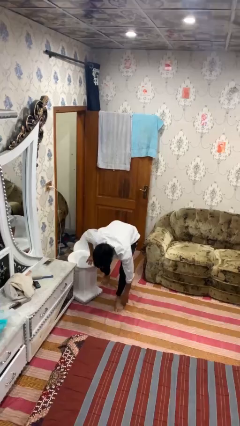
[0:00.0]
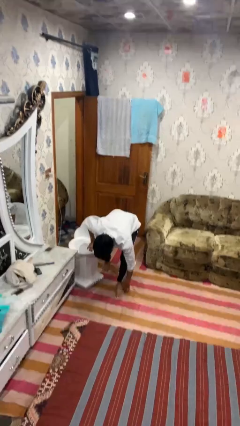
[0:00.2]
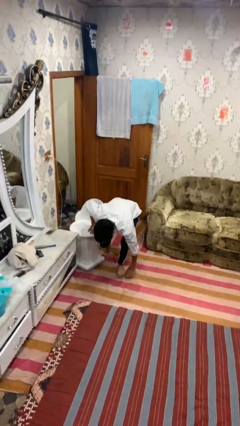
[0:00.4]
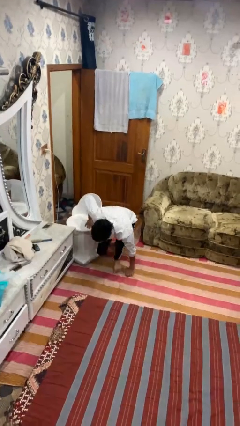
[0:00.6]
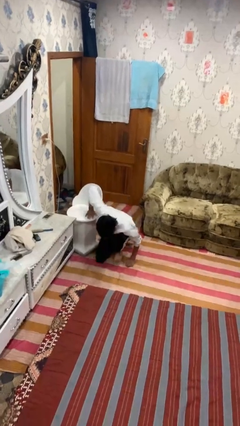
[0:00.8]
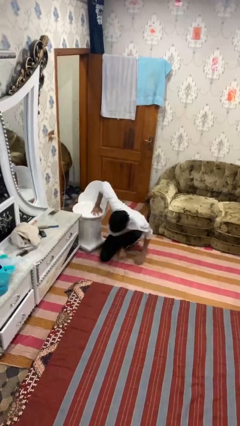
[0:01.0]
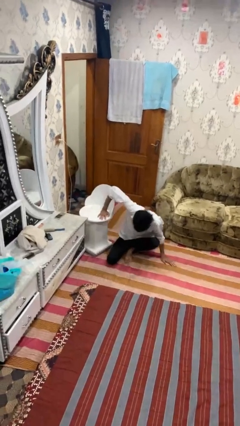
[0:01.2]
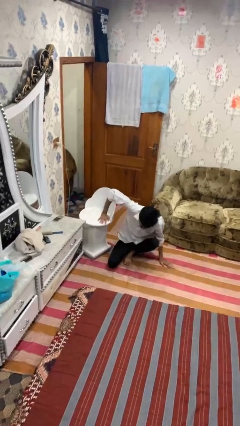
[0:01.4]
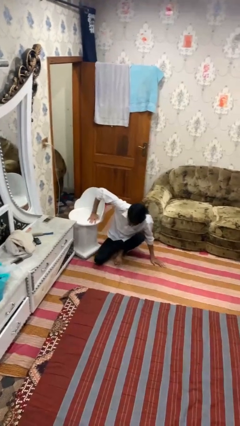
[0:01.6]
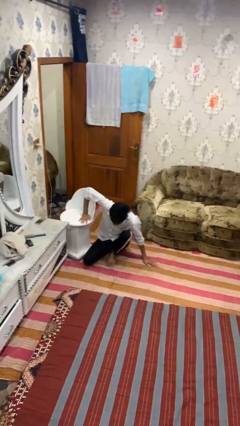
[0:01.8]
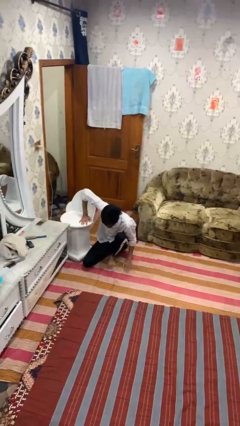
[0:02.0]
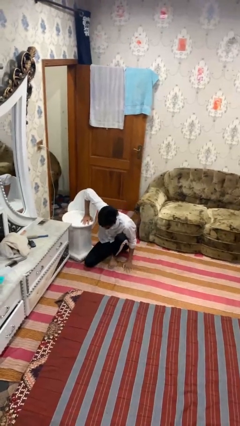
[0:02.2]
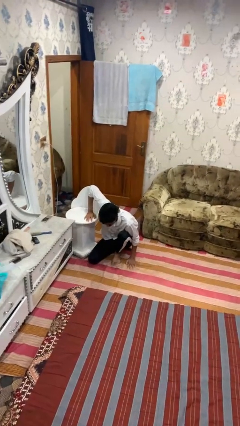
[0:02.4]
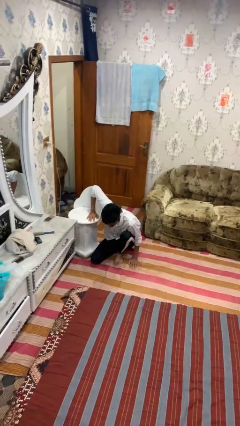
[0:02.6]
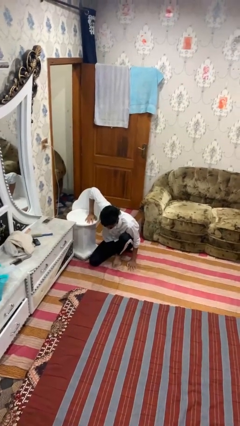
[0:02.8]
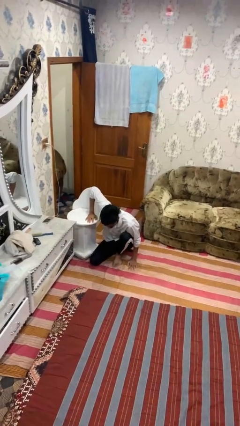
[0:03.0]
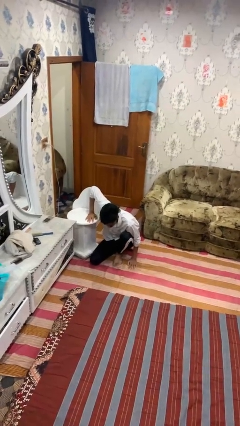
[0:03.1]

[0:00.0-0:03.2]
person lies down on floor

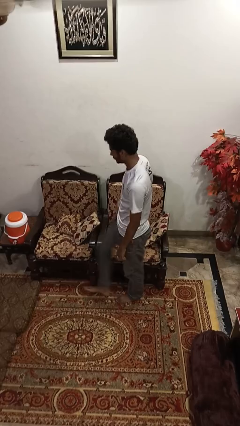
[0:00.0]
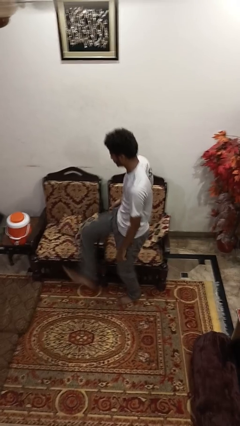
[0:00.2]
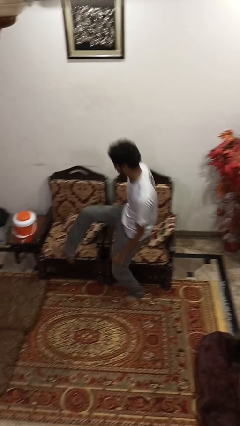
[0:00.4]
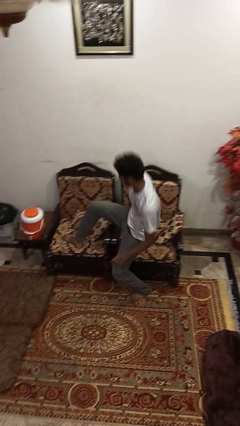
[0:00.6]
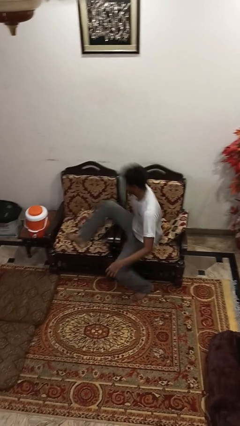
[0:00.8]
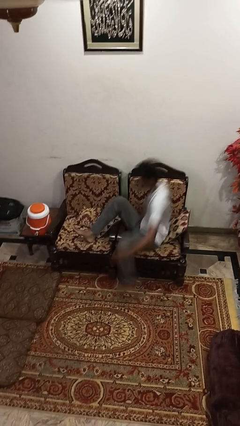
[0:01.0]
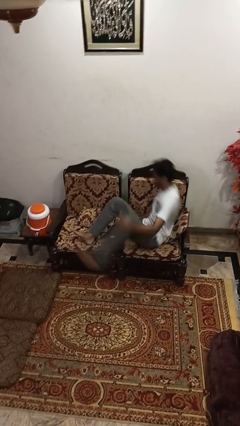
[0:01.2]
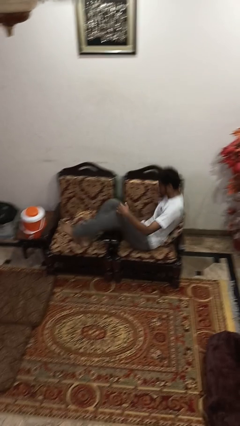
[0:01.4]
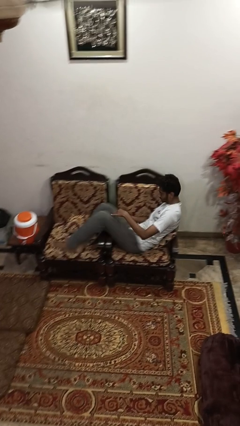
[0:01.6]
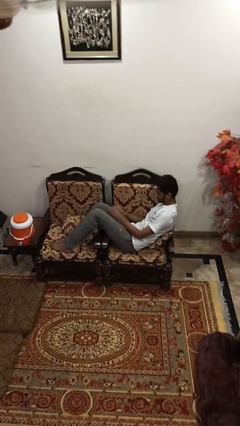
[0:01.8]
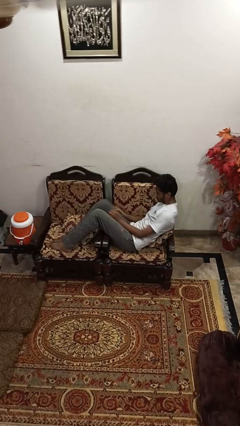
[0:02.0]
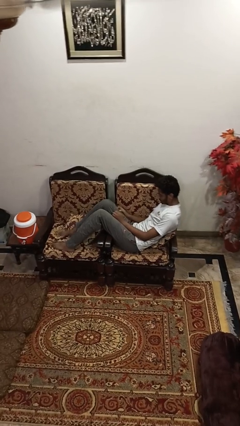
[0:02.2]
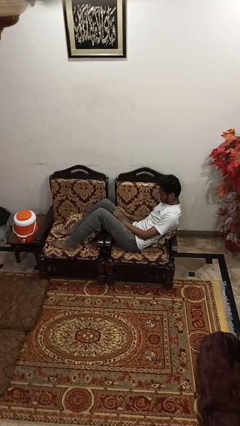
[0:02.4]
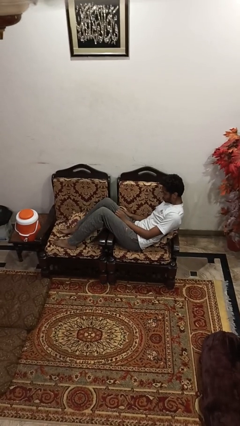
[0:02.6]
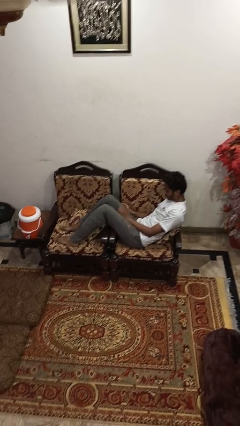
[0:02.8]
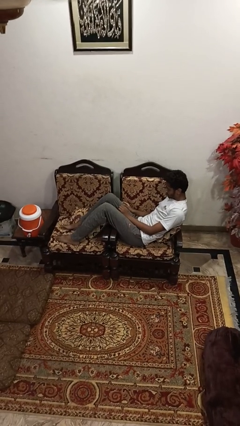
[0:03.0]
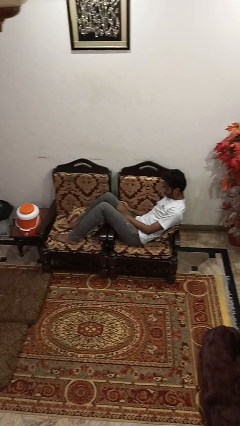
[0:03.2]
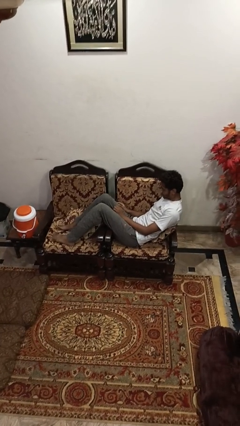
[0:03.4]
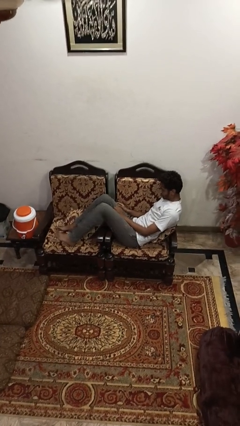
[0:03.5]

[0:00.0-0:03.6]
person lies down on couch

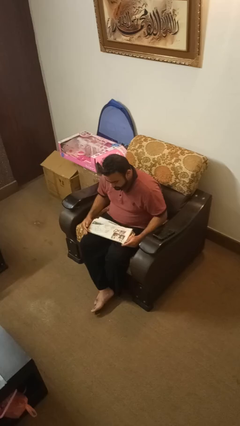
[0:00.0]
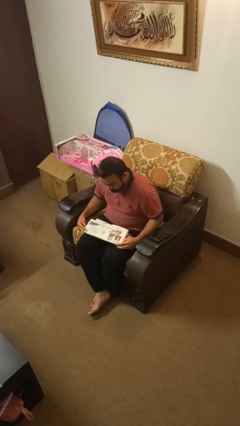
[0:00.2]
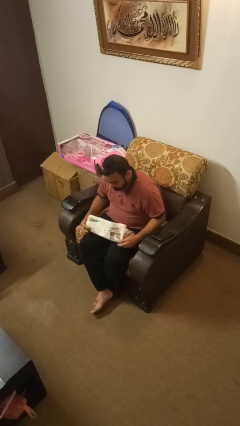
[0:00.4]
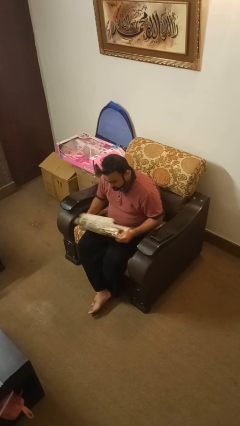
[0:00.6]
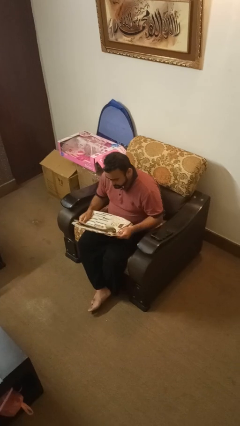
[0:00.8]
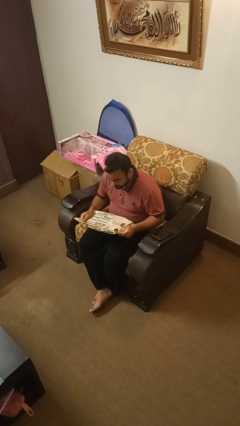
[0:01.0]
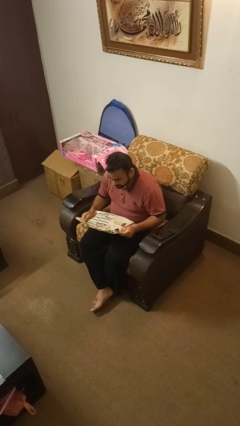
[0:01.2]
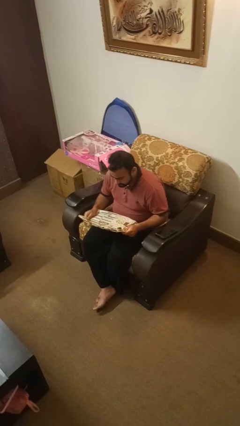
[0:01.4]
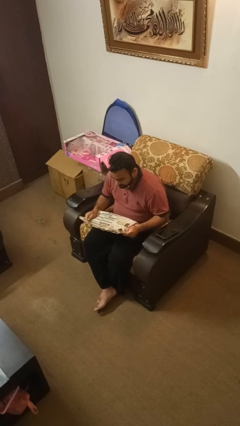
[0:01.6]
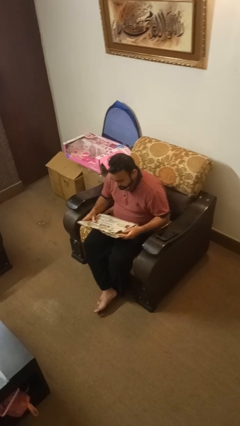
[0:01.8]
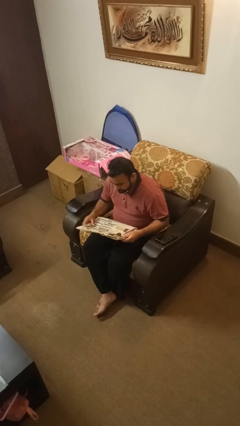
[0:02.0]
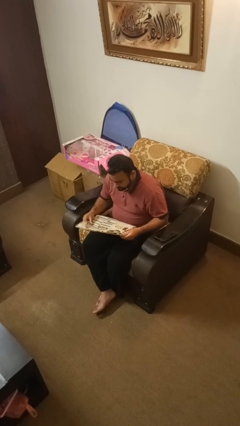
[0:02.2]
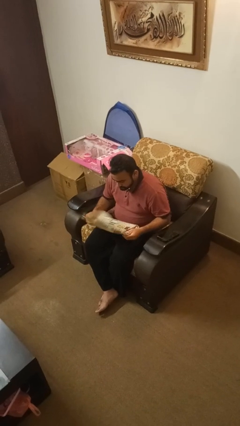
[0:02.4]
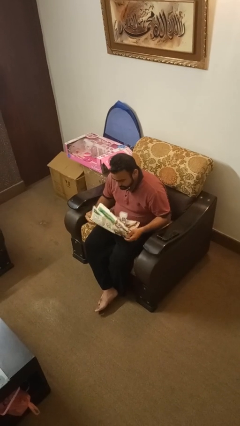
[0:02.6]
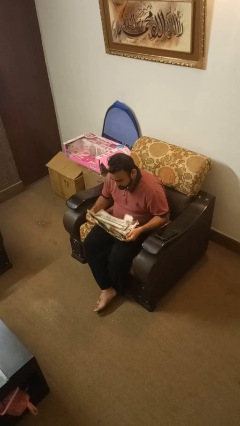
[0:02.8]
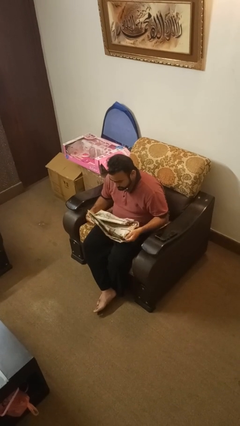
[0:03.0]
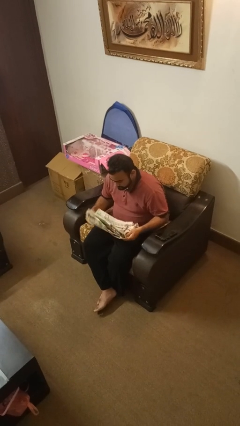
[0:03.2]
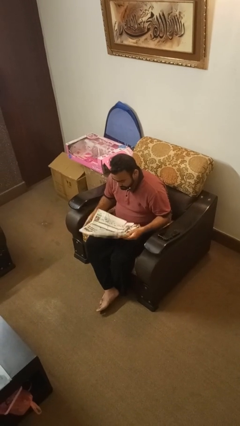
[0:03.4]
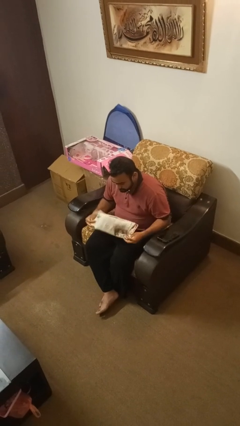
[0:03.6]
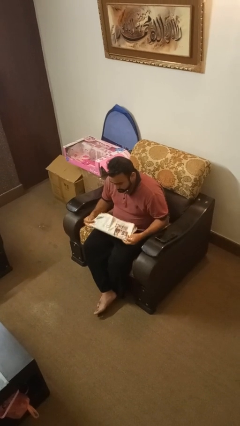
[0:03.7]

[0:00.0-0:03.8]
person reads newspaper

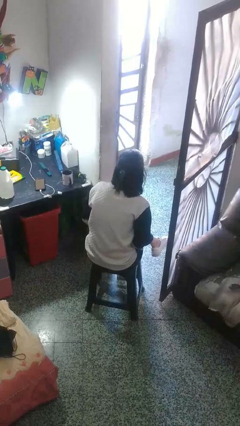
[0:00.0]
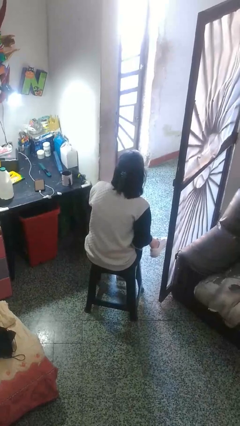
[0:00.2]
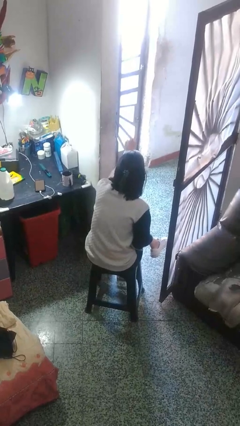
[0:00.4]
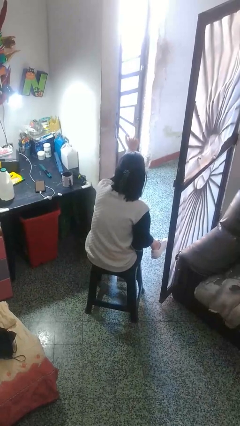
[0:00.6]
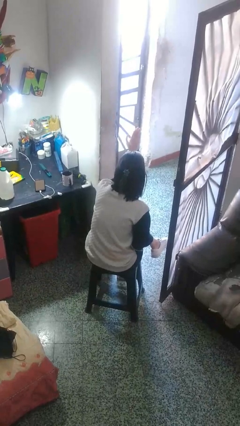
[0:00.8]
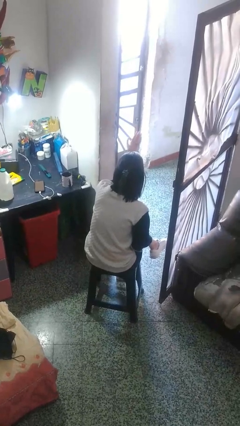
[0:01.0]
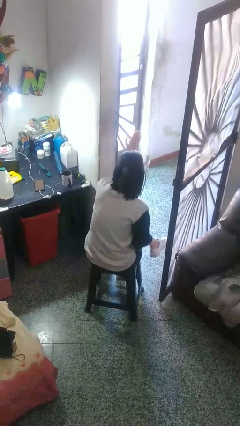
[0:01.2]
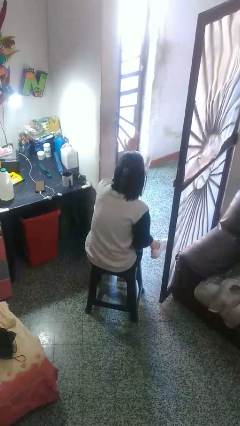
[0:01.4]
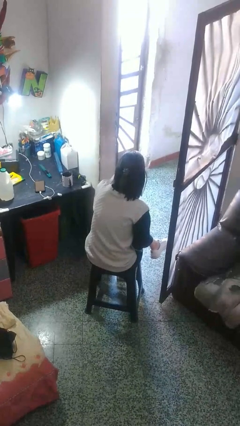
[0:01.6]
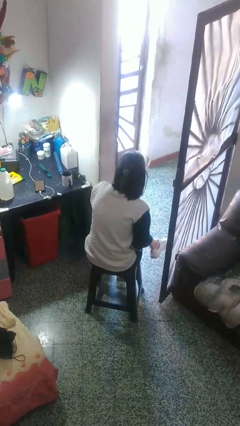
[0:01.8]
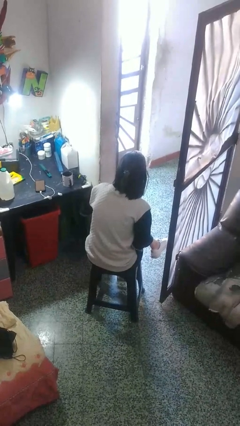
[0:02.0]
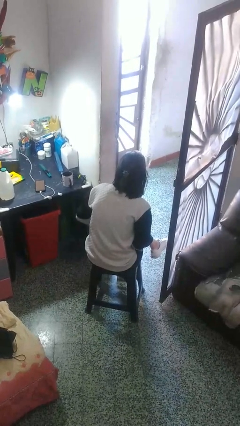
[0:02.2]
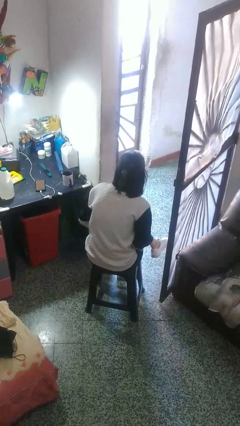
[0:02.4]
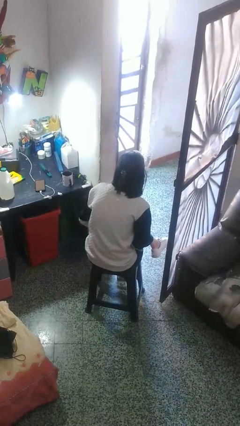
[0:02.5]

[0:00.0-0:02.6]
person gestures come here

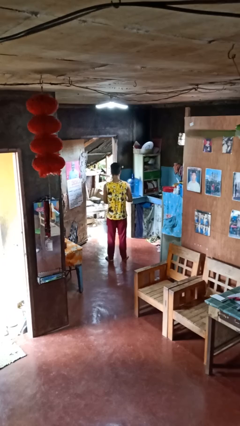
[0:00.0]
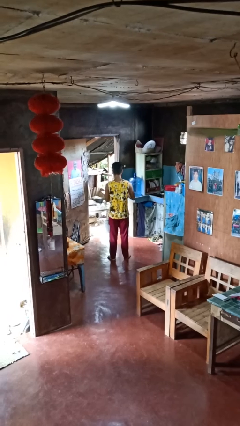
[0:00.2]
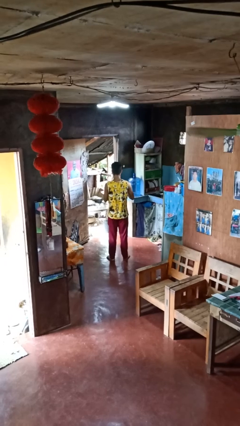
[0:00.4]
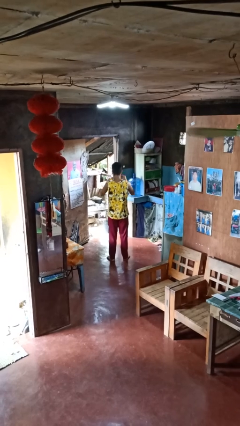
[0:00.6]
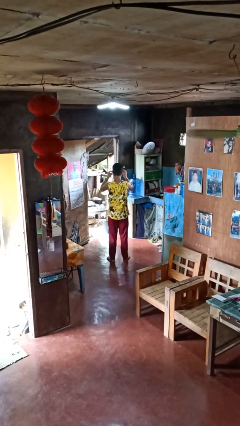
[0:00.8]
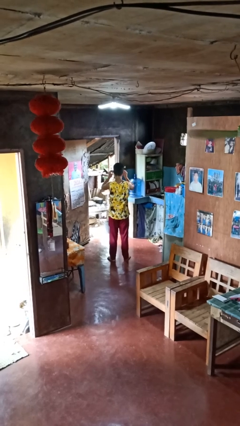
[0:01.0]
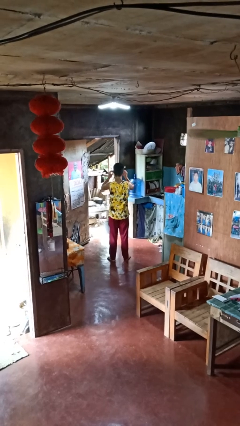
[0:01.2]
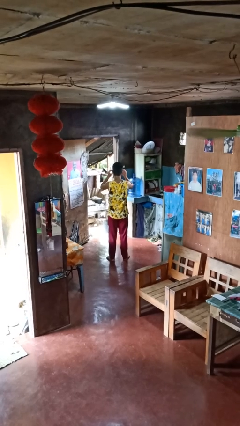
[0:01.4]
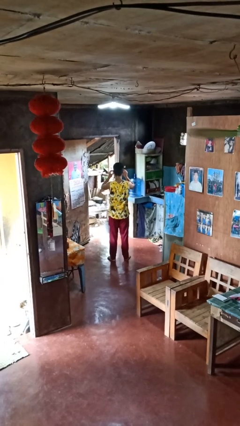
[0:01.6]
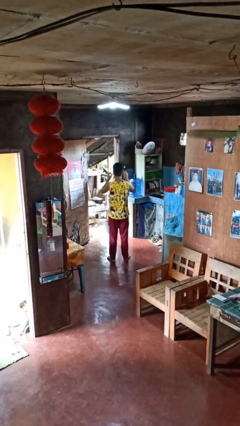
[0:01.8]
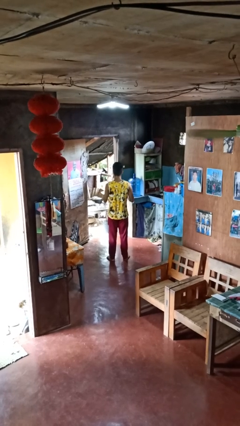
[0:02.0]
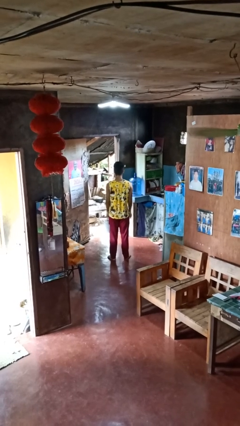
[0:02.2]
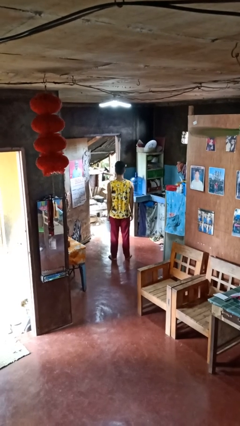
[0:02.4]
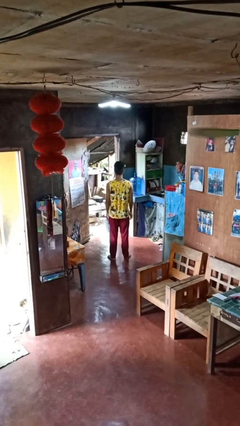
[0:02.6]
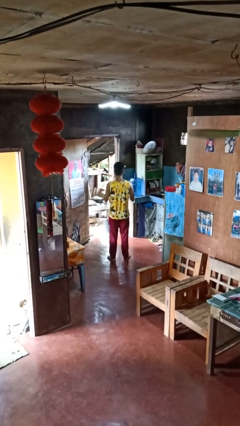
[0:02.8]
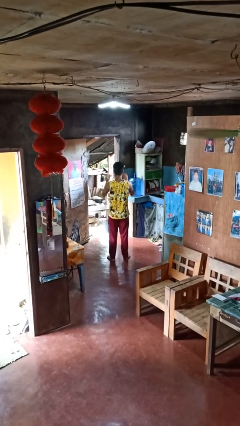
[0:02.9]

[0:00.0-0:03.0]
person puts on glasses

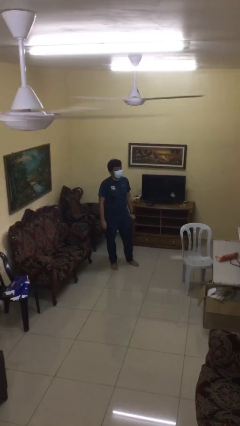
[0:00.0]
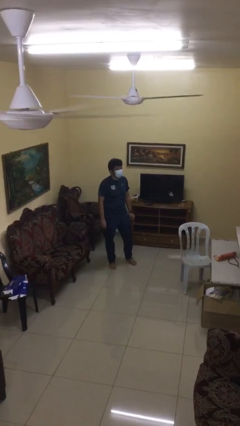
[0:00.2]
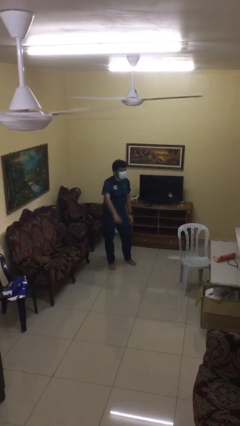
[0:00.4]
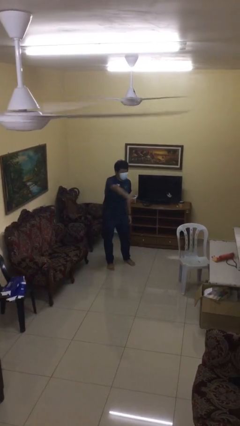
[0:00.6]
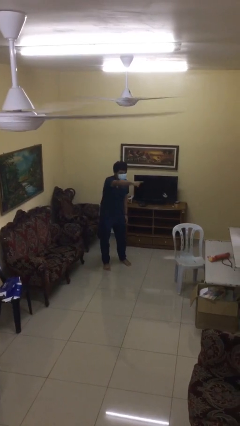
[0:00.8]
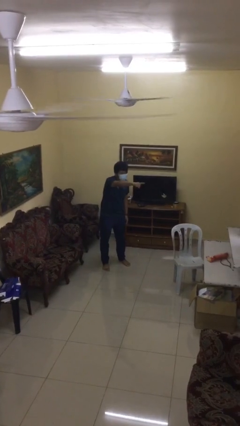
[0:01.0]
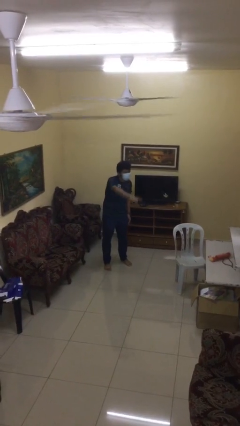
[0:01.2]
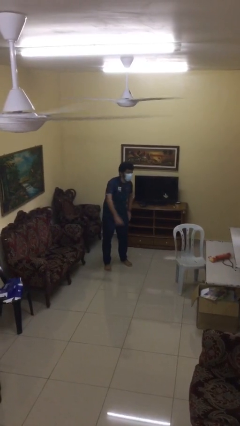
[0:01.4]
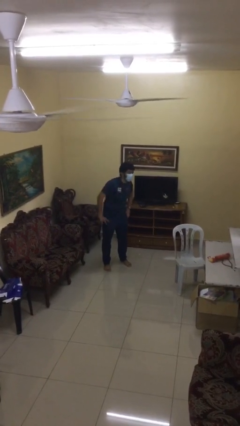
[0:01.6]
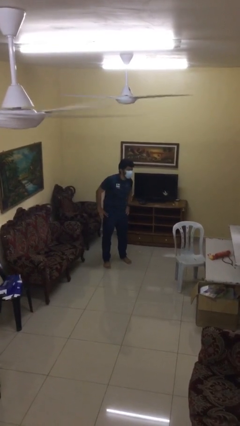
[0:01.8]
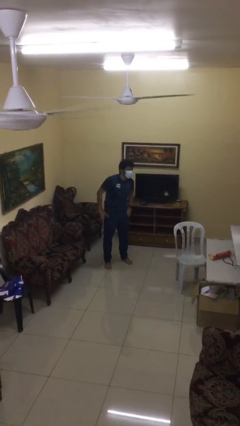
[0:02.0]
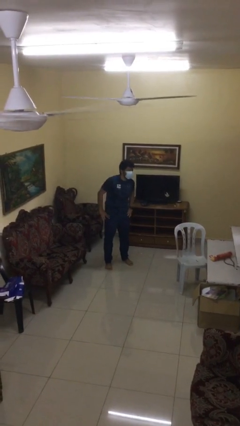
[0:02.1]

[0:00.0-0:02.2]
person points at person
